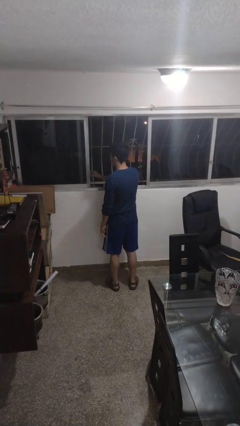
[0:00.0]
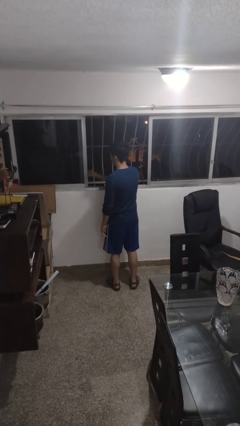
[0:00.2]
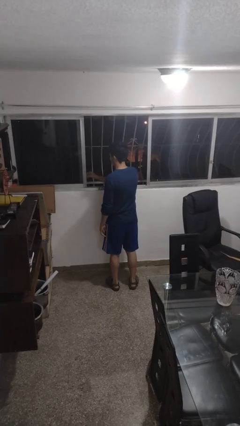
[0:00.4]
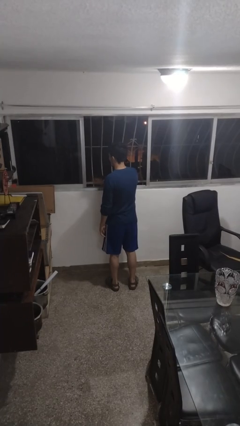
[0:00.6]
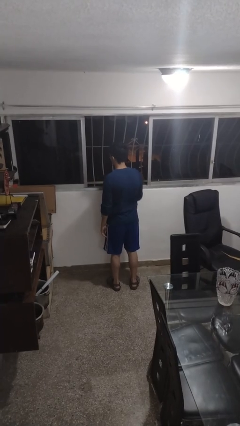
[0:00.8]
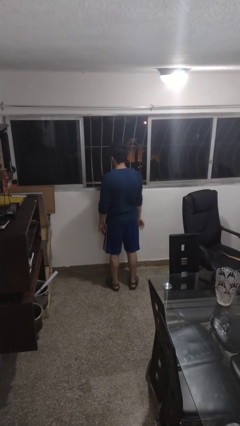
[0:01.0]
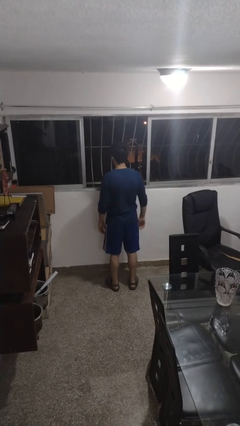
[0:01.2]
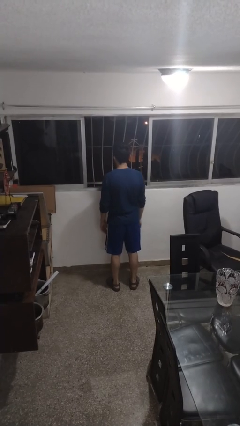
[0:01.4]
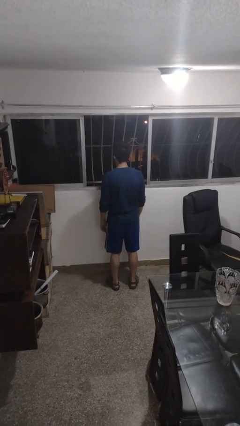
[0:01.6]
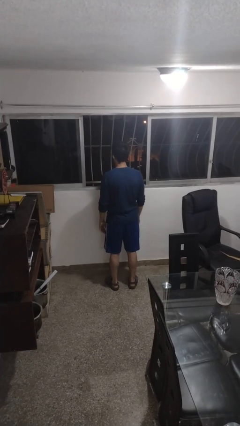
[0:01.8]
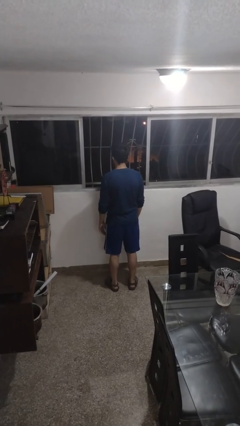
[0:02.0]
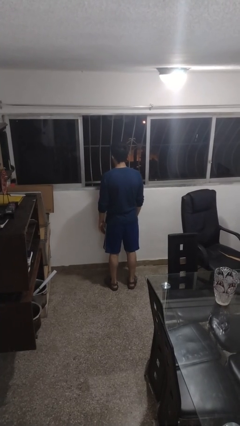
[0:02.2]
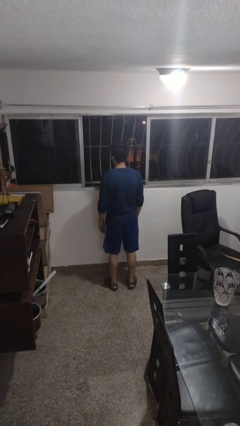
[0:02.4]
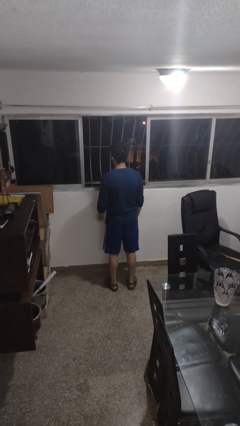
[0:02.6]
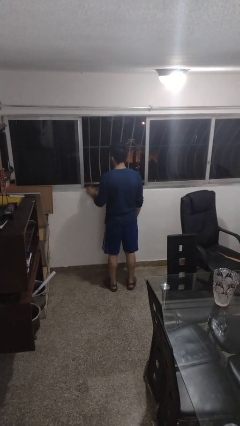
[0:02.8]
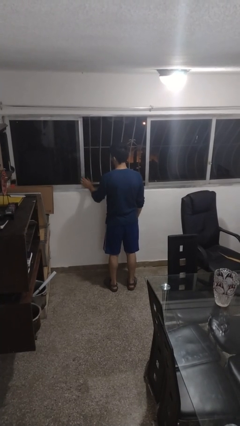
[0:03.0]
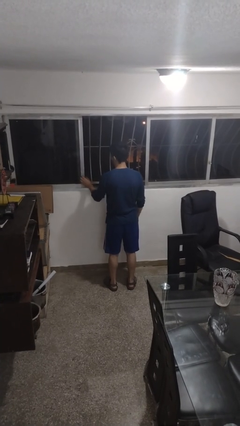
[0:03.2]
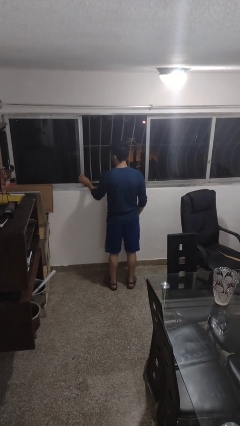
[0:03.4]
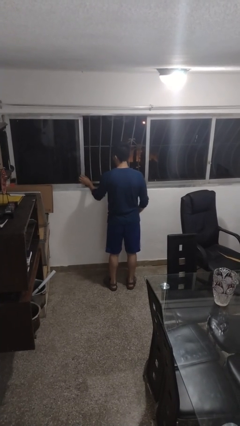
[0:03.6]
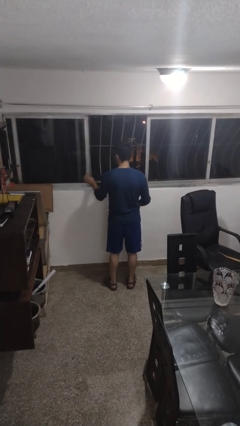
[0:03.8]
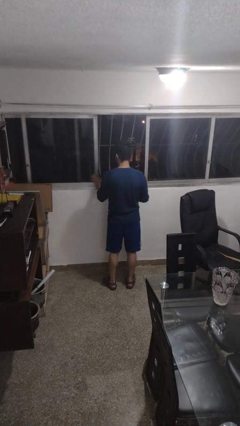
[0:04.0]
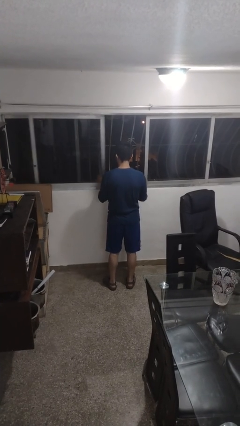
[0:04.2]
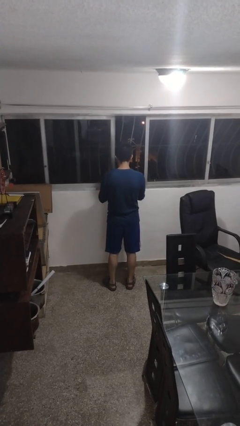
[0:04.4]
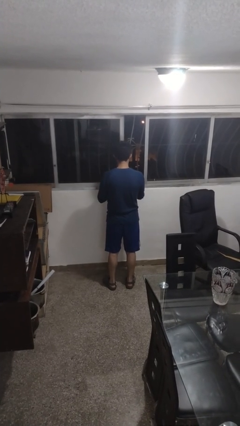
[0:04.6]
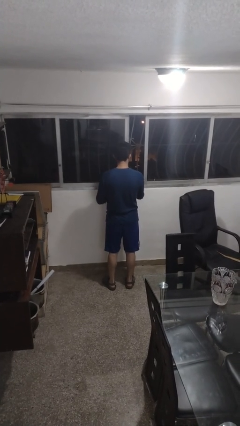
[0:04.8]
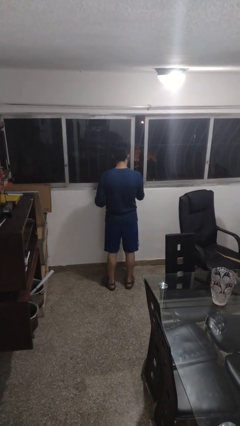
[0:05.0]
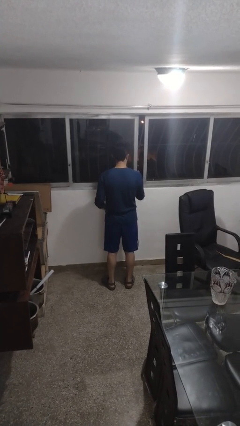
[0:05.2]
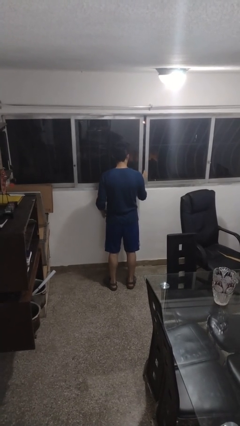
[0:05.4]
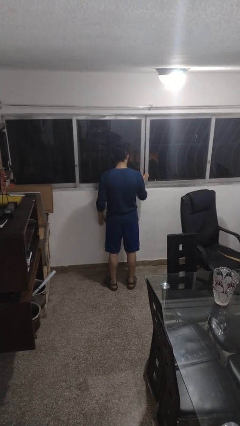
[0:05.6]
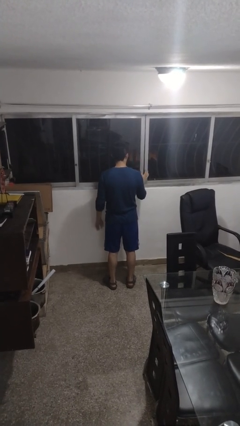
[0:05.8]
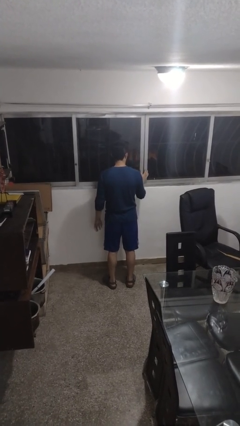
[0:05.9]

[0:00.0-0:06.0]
person closes home window

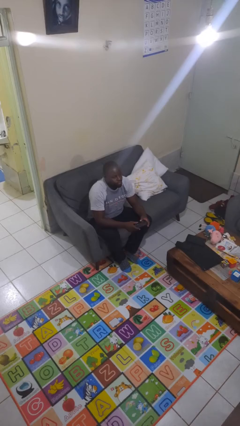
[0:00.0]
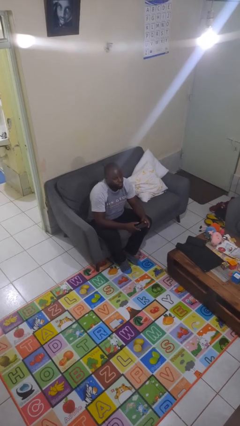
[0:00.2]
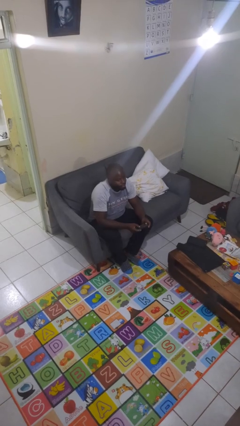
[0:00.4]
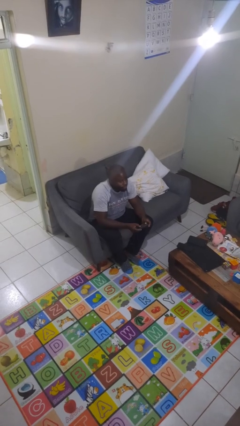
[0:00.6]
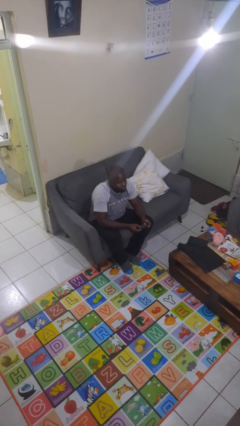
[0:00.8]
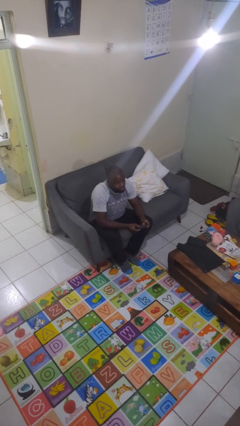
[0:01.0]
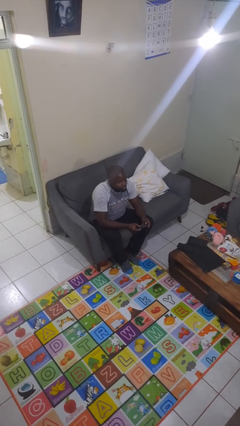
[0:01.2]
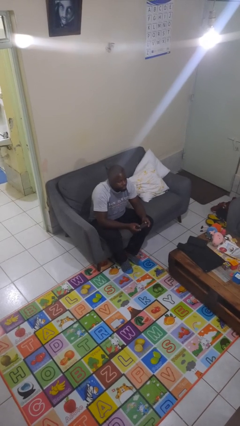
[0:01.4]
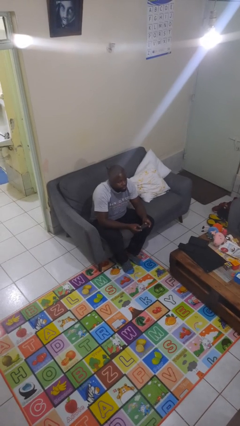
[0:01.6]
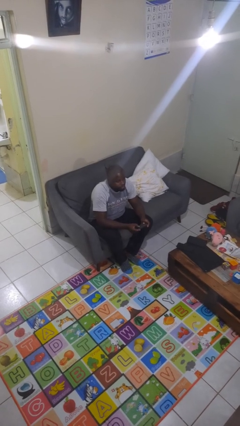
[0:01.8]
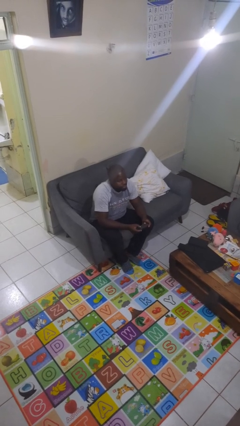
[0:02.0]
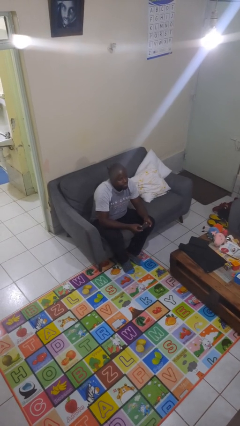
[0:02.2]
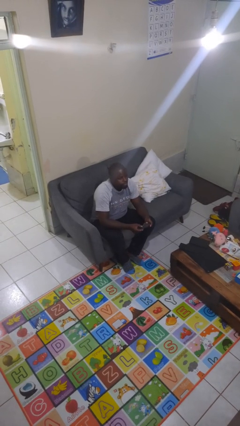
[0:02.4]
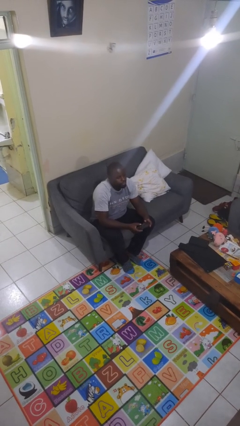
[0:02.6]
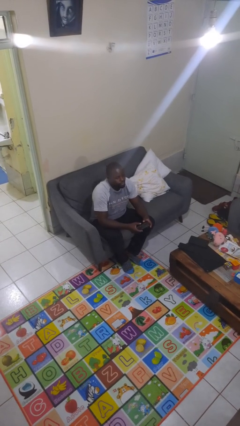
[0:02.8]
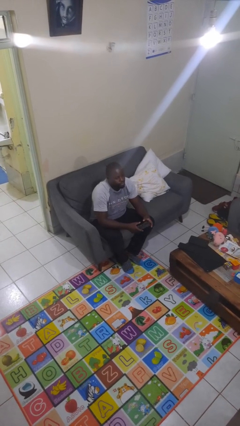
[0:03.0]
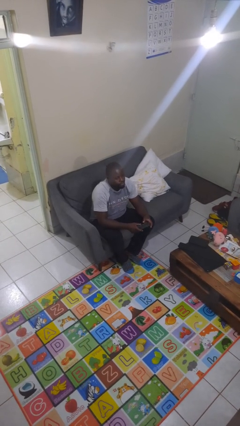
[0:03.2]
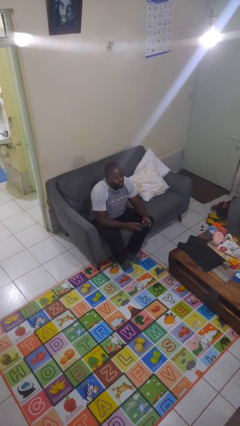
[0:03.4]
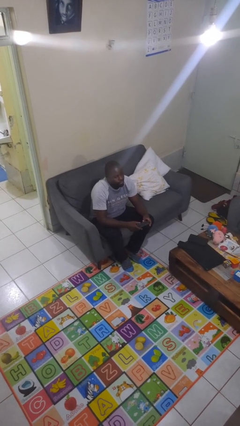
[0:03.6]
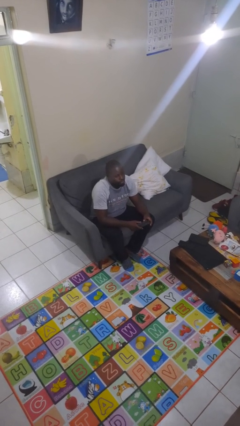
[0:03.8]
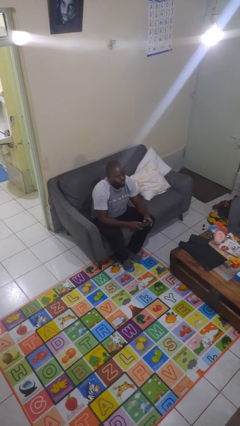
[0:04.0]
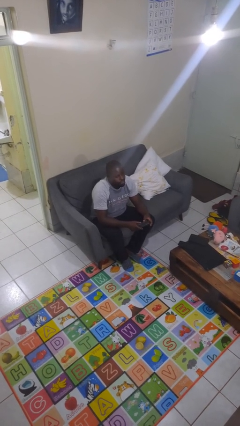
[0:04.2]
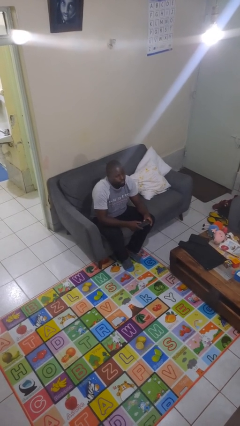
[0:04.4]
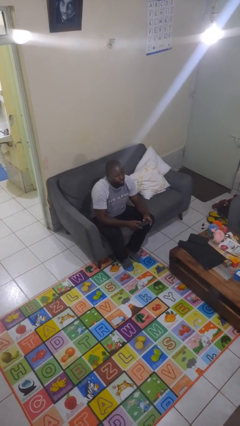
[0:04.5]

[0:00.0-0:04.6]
person interacts with handheld game

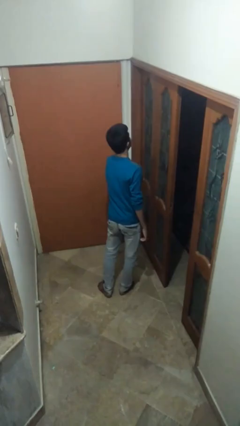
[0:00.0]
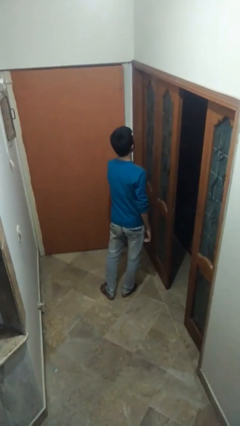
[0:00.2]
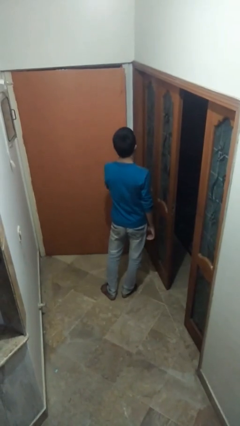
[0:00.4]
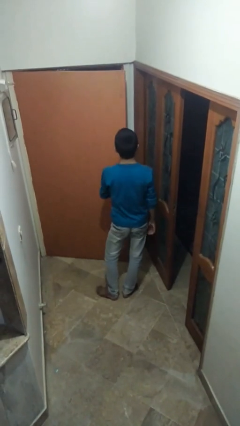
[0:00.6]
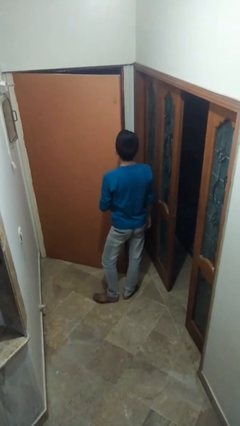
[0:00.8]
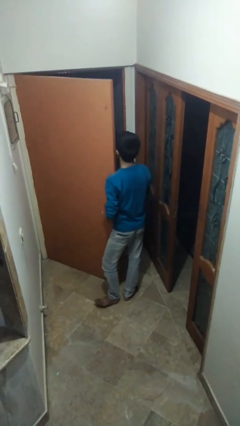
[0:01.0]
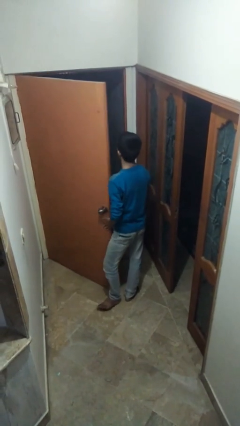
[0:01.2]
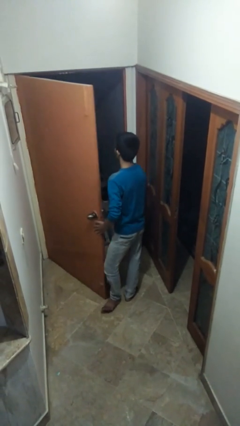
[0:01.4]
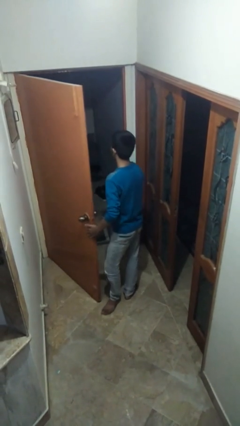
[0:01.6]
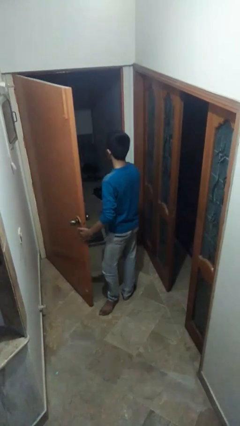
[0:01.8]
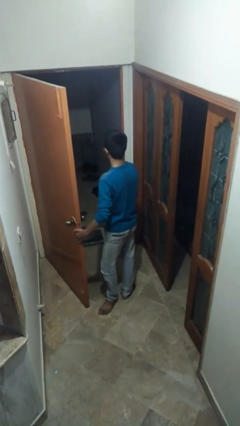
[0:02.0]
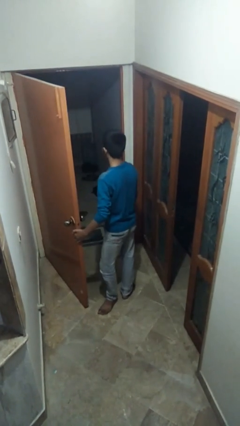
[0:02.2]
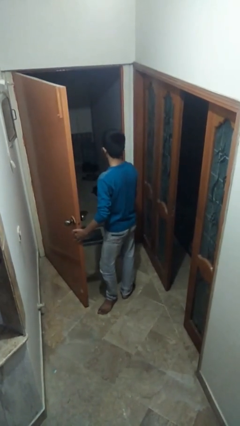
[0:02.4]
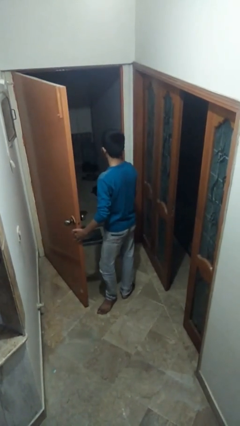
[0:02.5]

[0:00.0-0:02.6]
person opens facility door

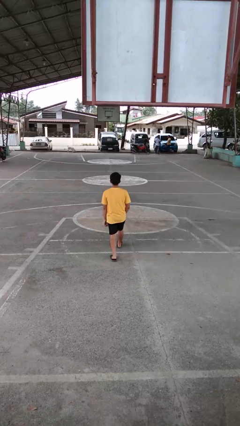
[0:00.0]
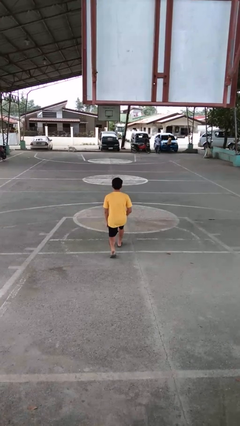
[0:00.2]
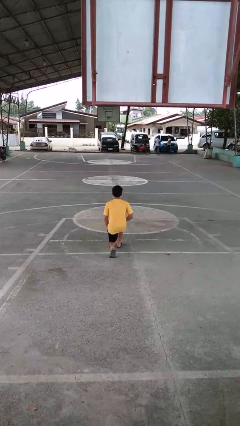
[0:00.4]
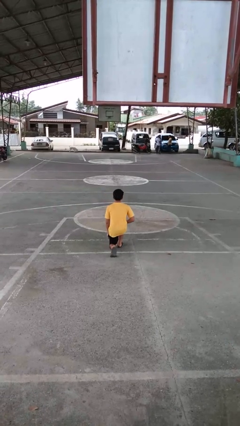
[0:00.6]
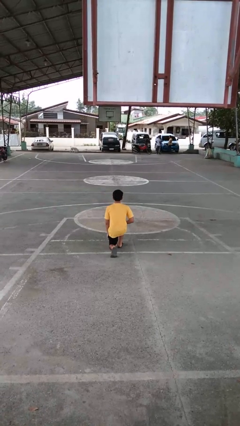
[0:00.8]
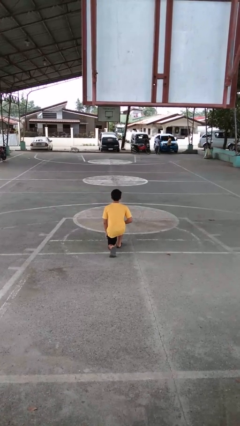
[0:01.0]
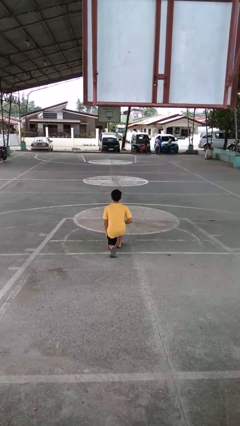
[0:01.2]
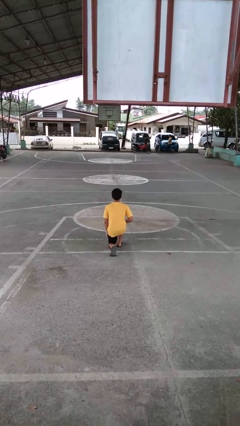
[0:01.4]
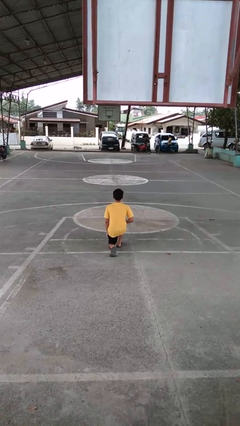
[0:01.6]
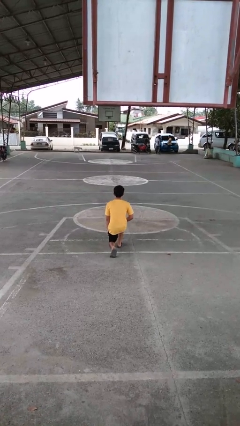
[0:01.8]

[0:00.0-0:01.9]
person kneels

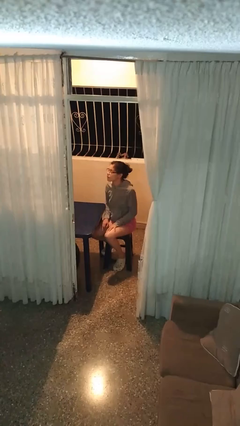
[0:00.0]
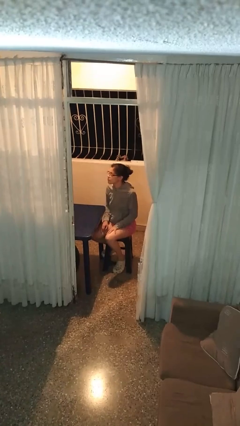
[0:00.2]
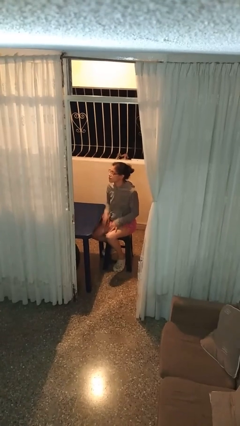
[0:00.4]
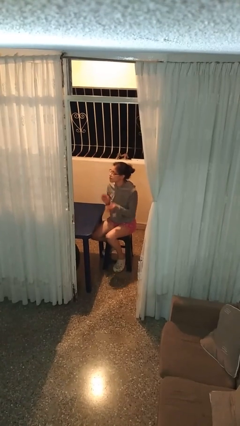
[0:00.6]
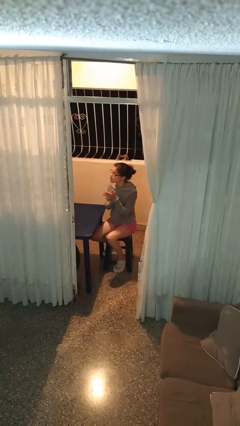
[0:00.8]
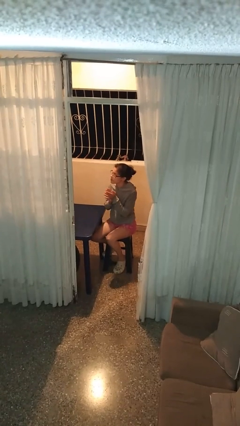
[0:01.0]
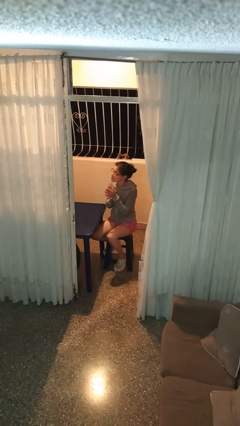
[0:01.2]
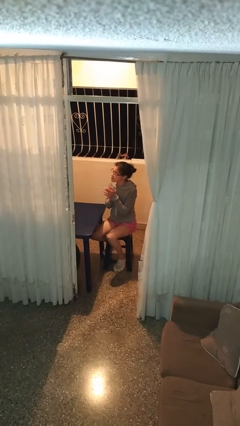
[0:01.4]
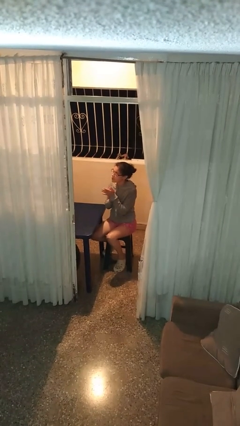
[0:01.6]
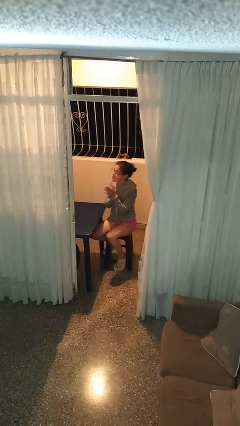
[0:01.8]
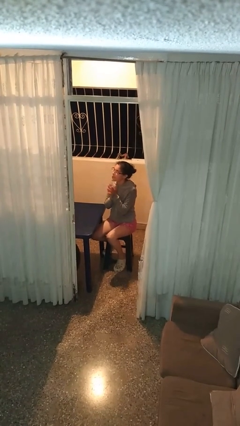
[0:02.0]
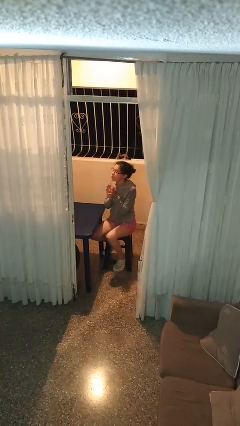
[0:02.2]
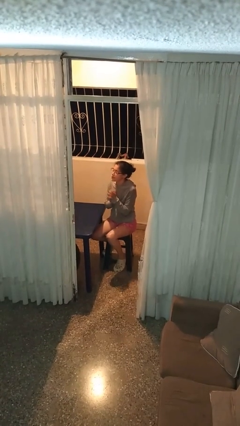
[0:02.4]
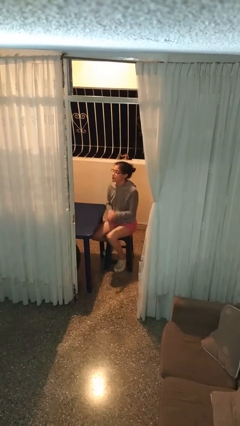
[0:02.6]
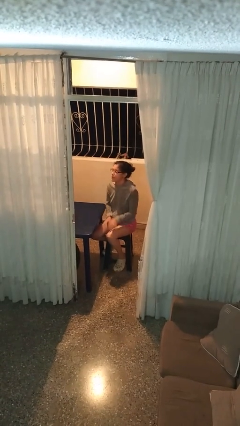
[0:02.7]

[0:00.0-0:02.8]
person claps hands
